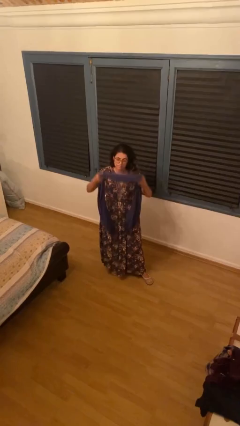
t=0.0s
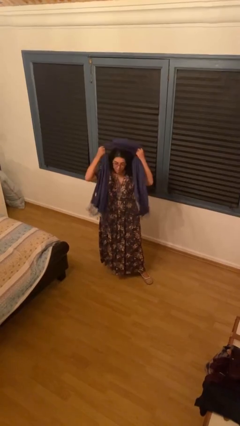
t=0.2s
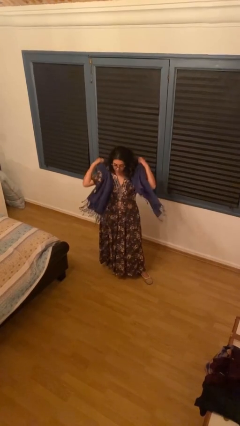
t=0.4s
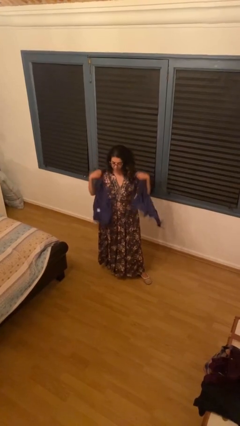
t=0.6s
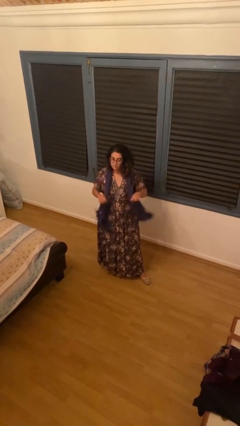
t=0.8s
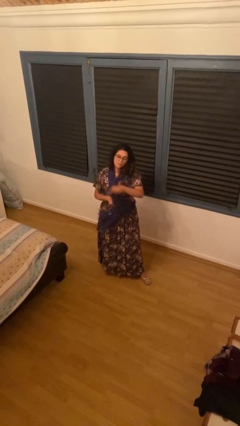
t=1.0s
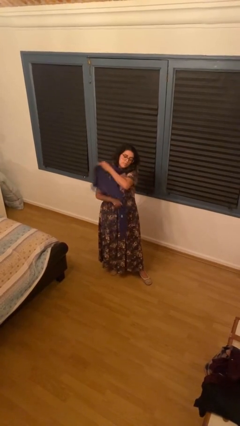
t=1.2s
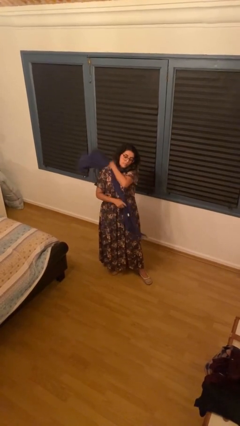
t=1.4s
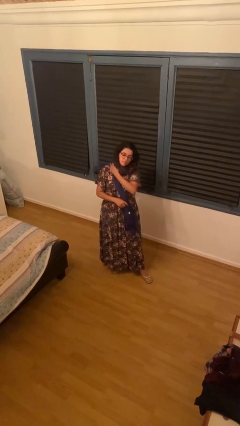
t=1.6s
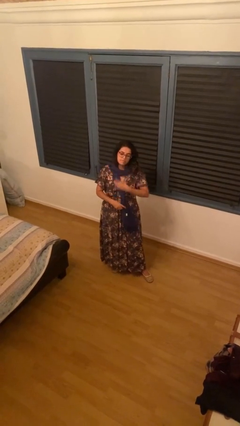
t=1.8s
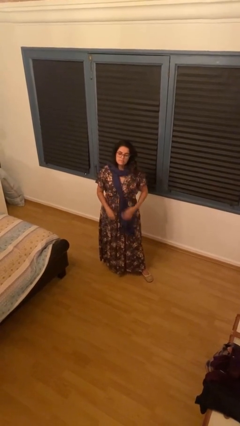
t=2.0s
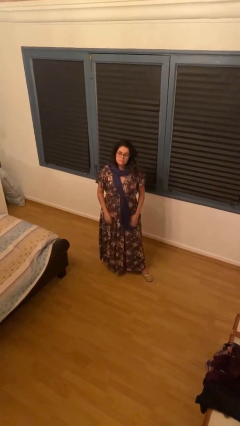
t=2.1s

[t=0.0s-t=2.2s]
person puts on scarf

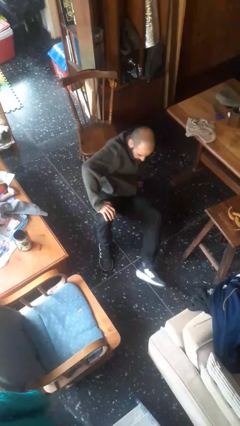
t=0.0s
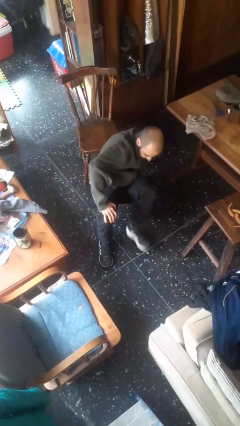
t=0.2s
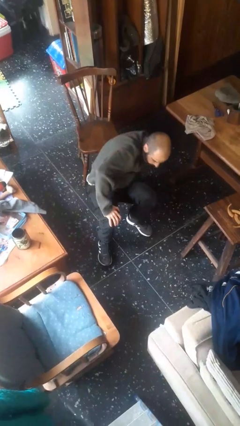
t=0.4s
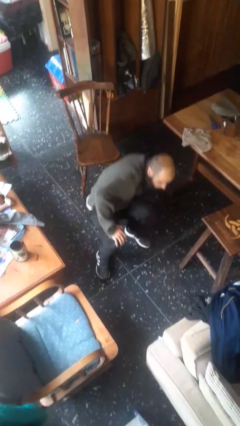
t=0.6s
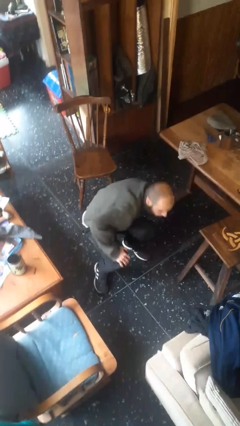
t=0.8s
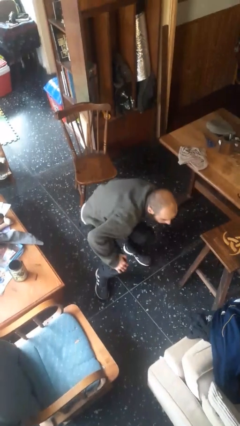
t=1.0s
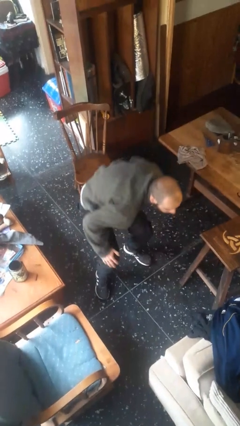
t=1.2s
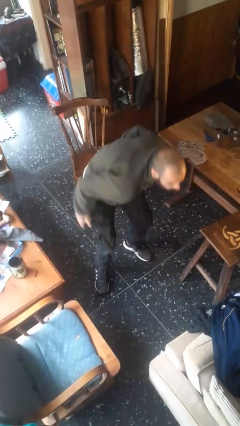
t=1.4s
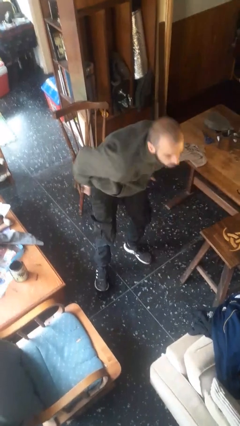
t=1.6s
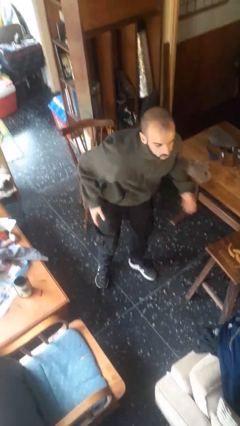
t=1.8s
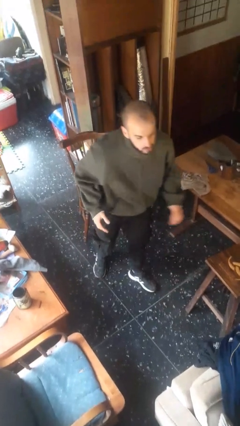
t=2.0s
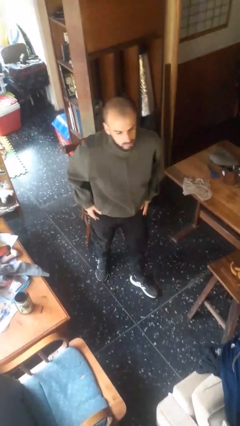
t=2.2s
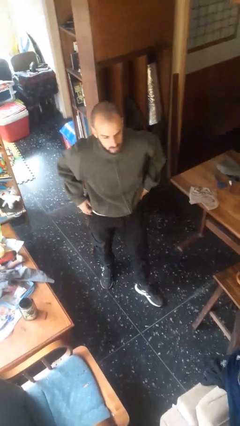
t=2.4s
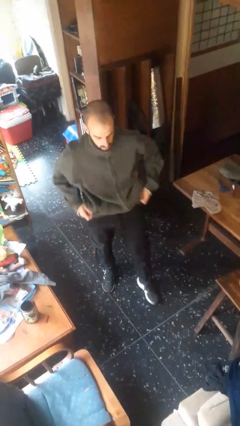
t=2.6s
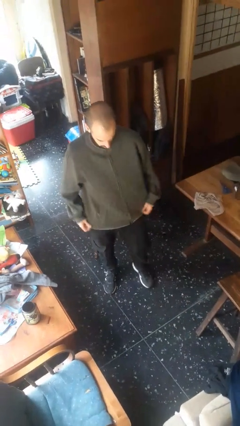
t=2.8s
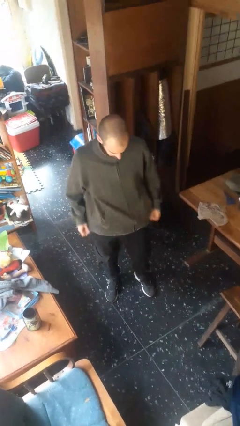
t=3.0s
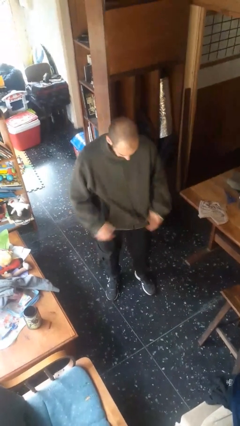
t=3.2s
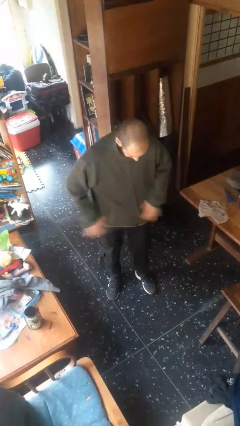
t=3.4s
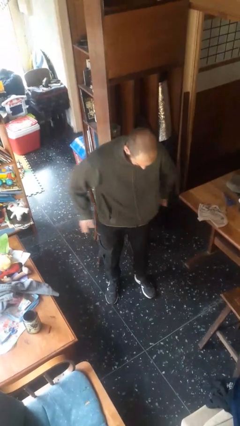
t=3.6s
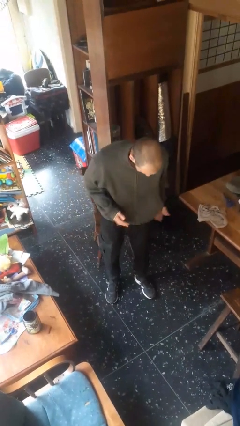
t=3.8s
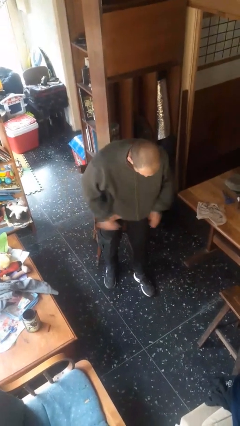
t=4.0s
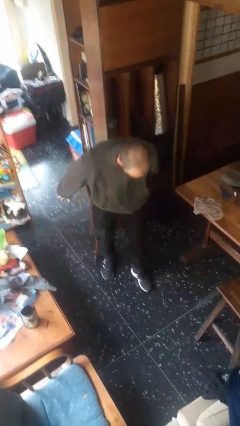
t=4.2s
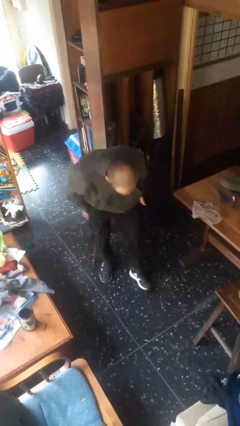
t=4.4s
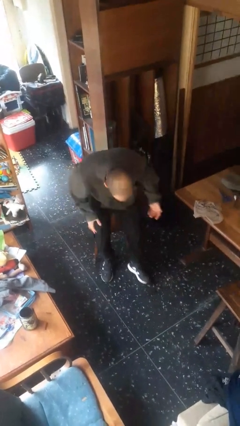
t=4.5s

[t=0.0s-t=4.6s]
person stands up from floor

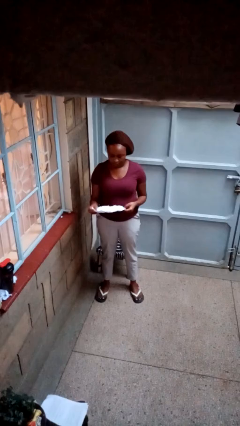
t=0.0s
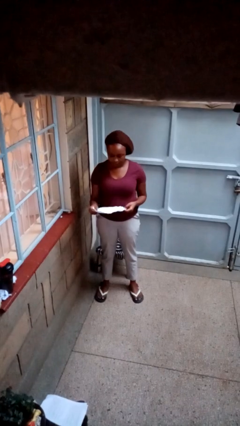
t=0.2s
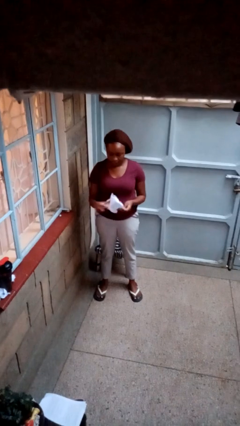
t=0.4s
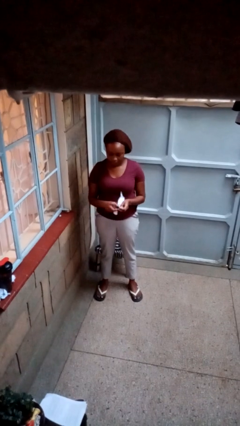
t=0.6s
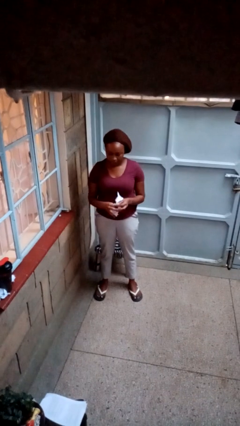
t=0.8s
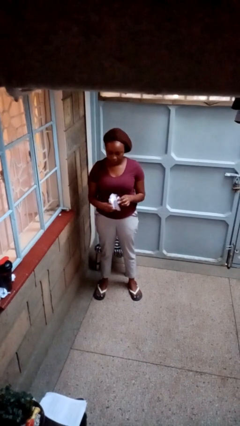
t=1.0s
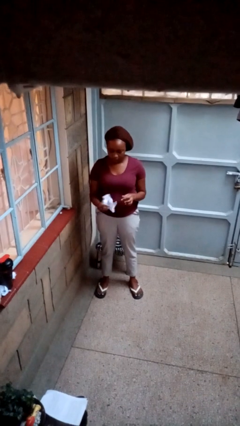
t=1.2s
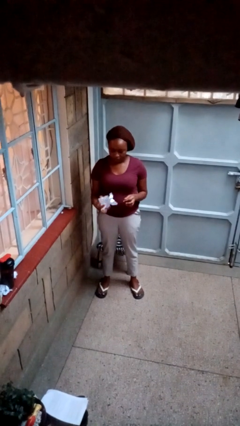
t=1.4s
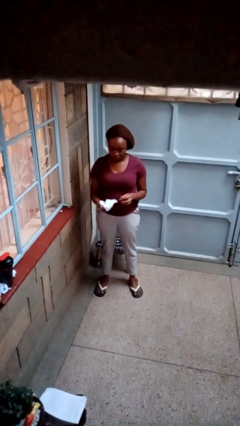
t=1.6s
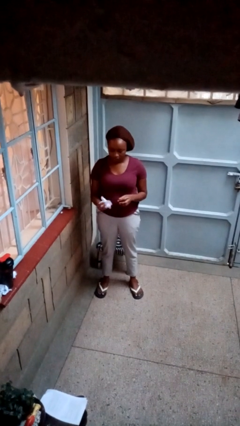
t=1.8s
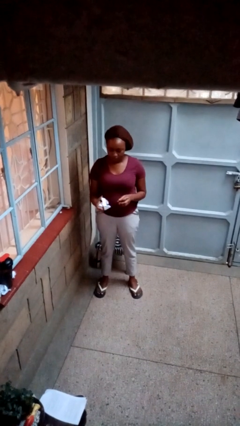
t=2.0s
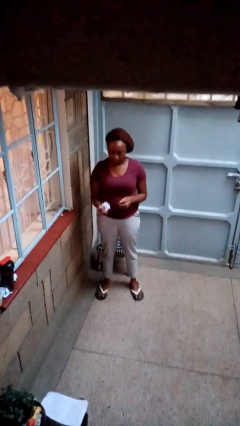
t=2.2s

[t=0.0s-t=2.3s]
person crumples paper

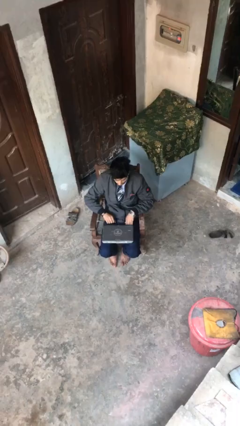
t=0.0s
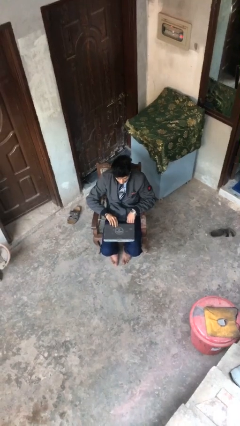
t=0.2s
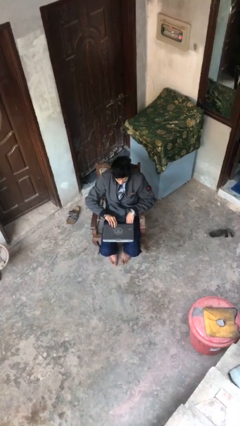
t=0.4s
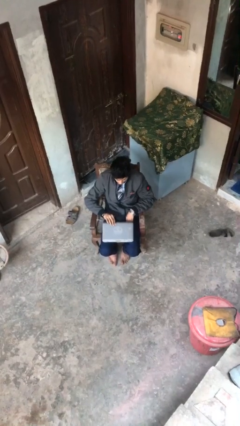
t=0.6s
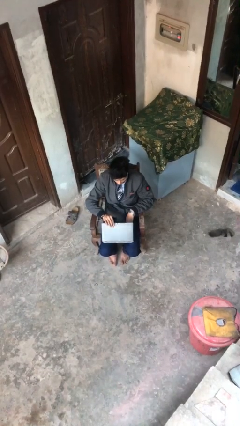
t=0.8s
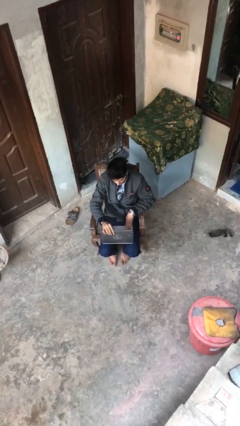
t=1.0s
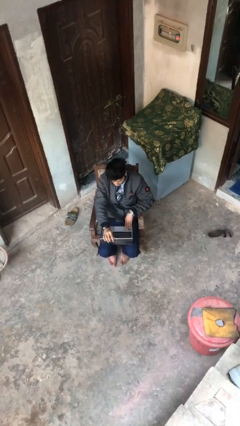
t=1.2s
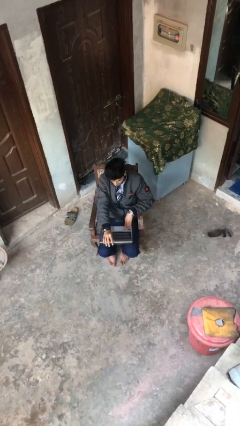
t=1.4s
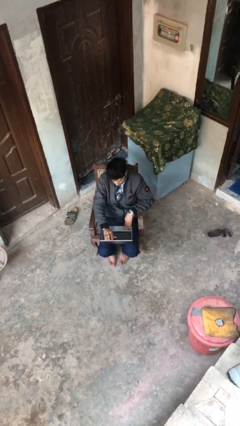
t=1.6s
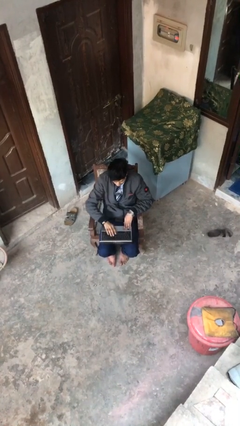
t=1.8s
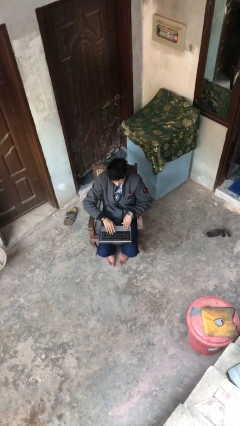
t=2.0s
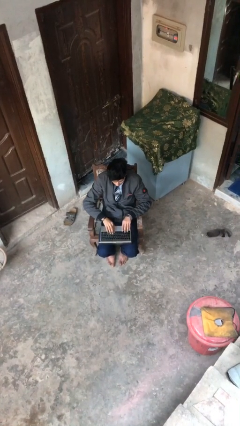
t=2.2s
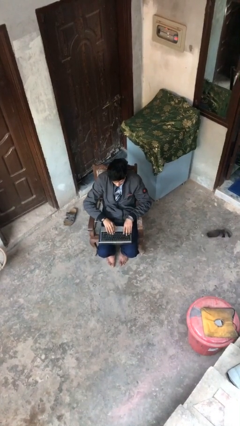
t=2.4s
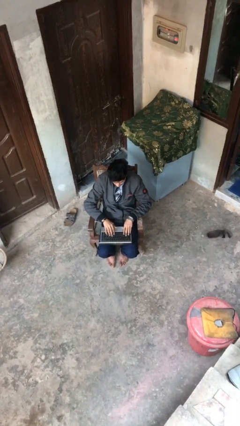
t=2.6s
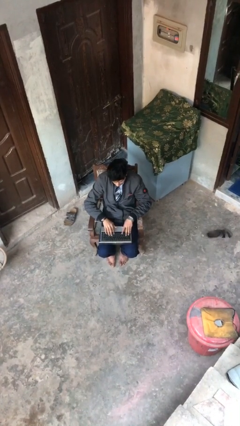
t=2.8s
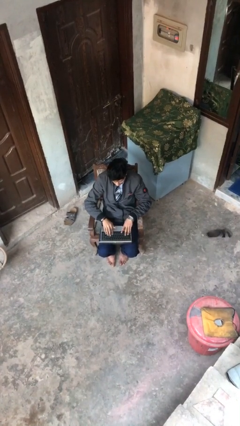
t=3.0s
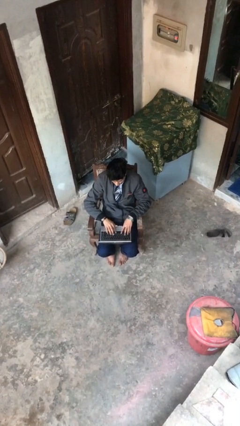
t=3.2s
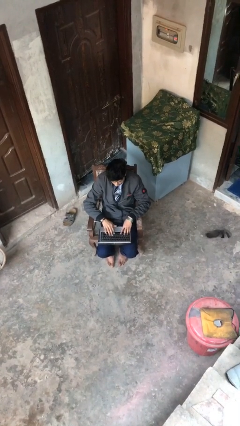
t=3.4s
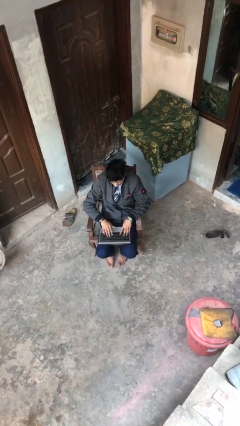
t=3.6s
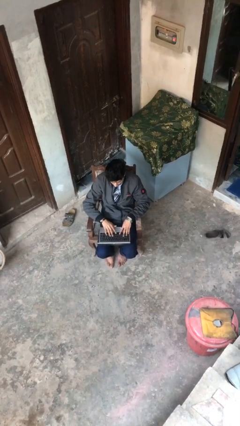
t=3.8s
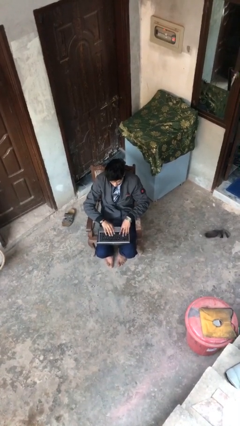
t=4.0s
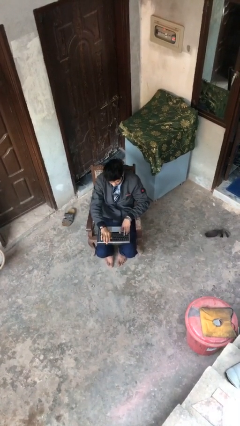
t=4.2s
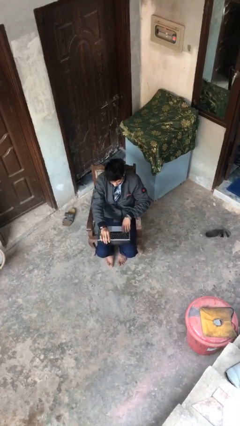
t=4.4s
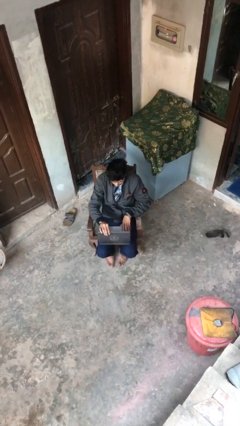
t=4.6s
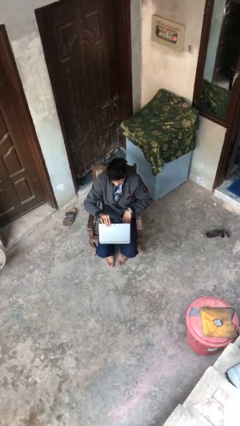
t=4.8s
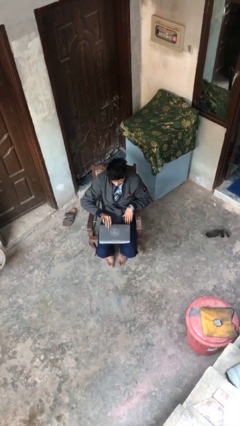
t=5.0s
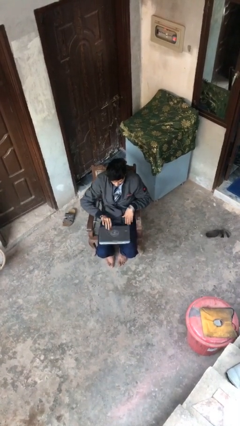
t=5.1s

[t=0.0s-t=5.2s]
person interacts with laptop

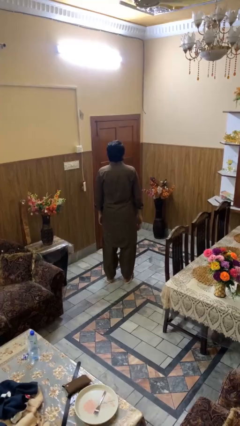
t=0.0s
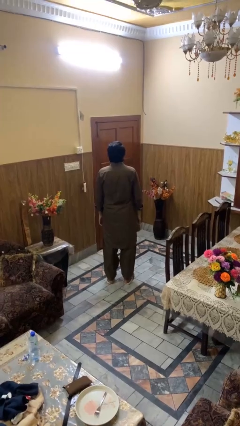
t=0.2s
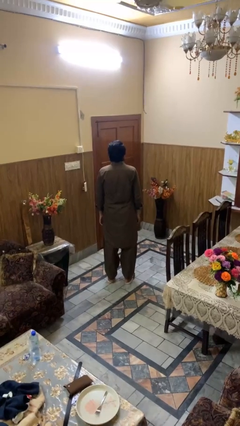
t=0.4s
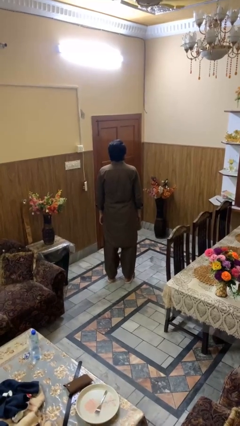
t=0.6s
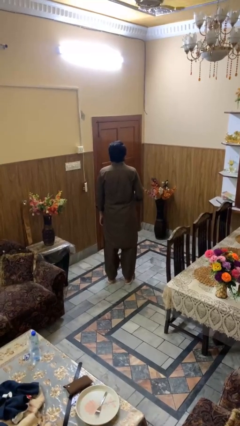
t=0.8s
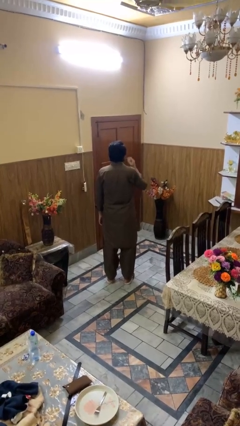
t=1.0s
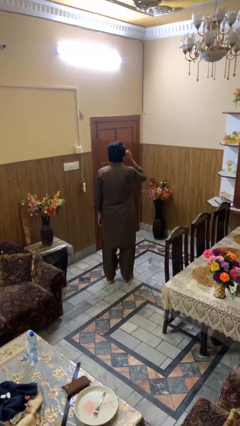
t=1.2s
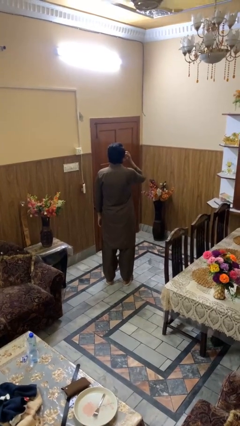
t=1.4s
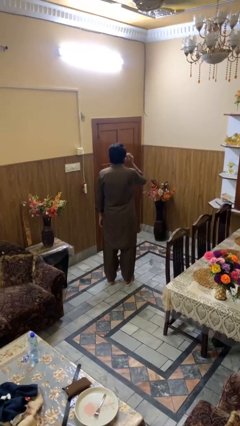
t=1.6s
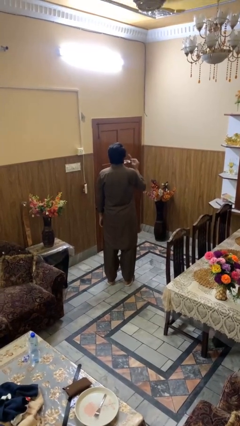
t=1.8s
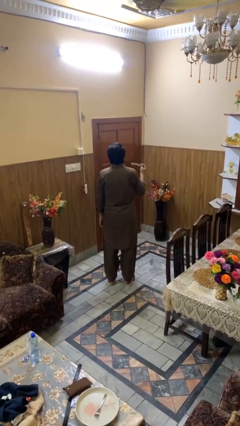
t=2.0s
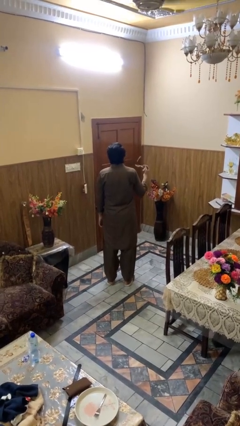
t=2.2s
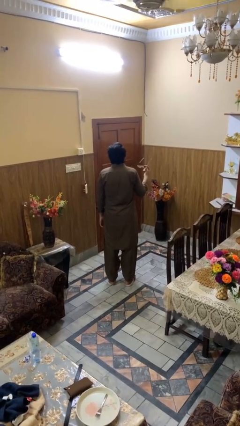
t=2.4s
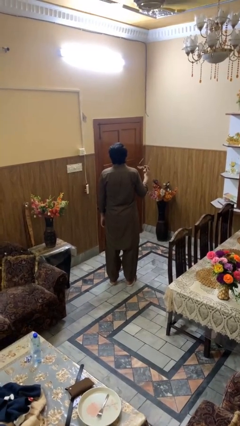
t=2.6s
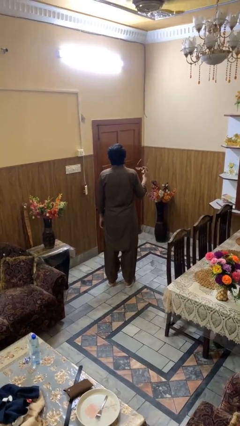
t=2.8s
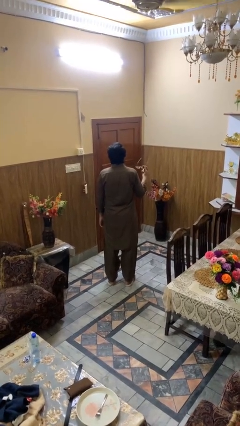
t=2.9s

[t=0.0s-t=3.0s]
person takes off sunglasses

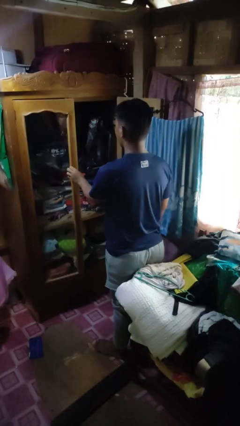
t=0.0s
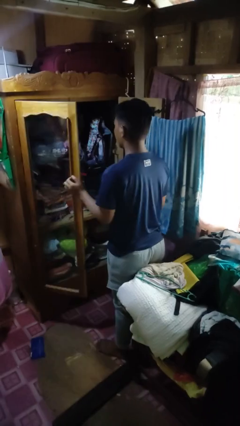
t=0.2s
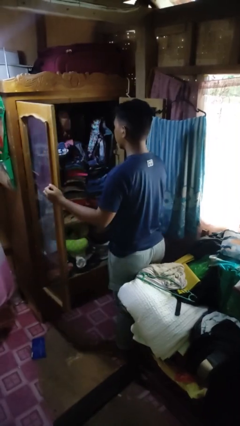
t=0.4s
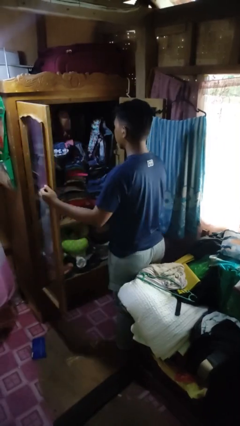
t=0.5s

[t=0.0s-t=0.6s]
person opens closet door
